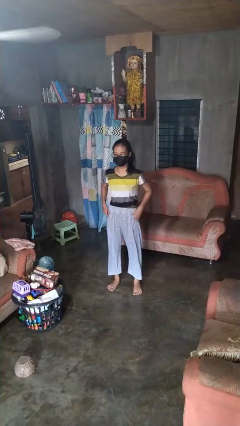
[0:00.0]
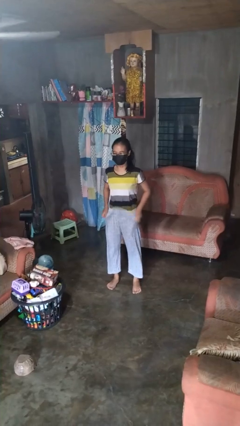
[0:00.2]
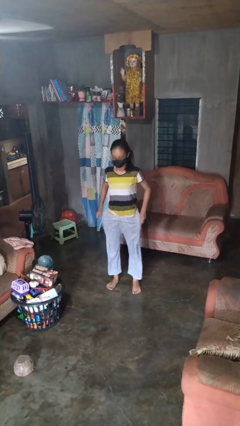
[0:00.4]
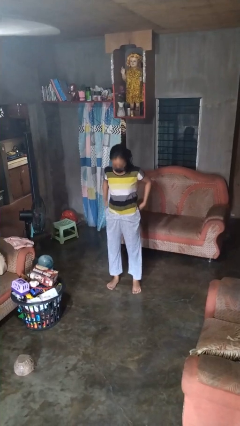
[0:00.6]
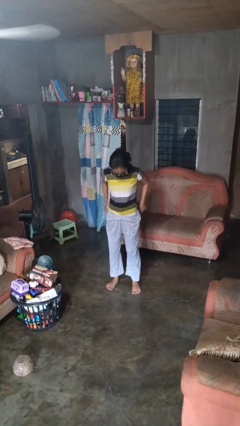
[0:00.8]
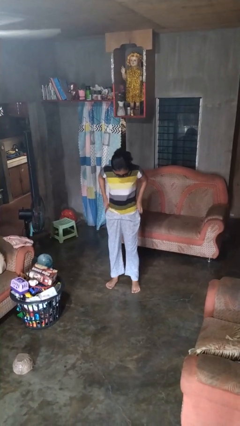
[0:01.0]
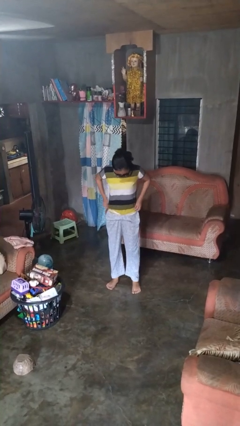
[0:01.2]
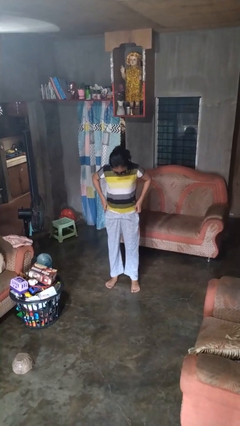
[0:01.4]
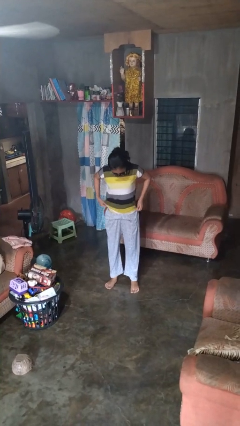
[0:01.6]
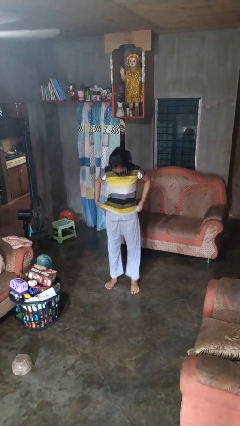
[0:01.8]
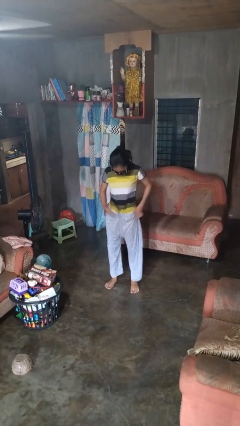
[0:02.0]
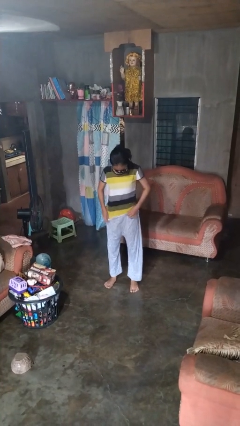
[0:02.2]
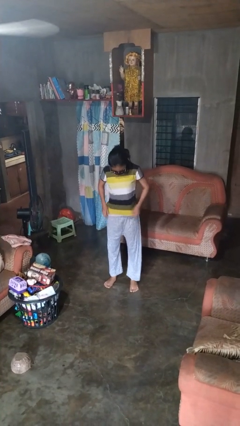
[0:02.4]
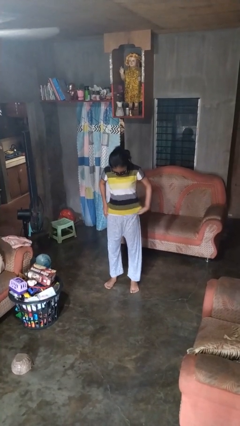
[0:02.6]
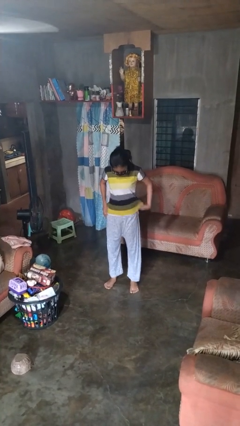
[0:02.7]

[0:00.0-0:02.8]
person untucks shirt

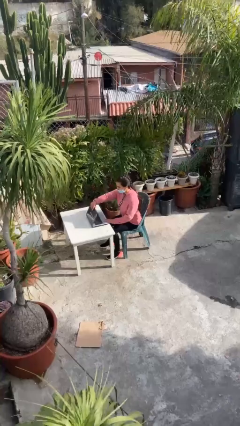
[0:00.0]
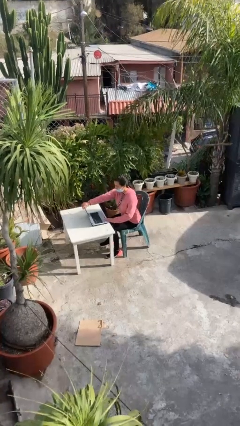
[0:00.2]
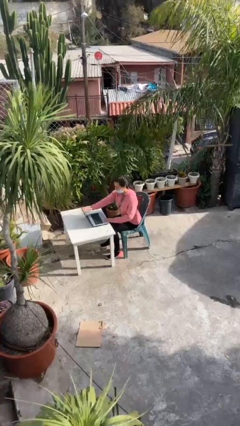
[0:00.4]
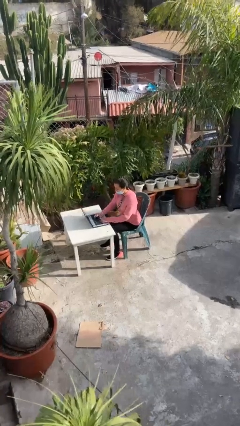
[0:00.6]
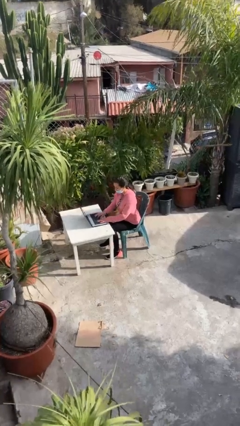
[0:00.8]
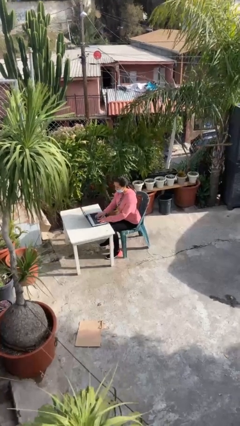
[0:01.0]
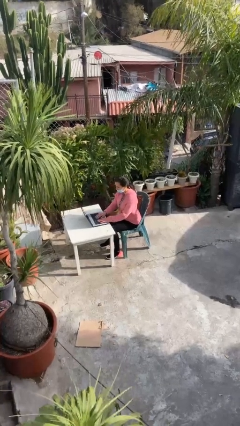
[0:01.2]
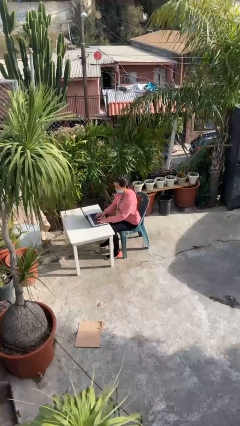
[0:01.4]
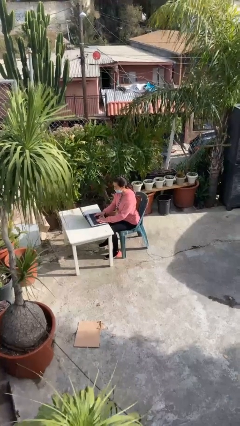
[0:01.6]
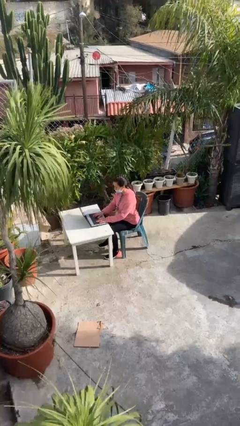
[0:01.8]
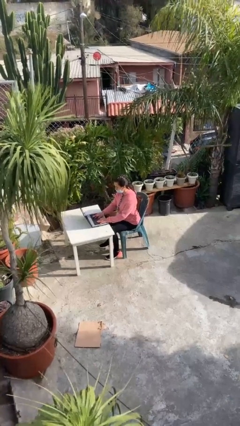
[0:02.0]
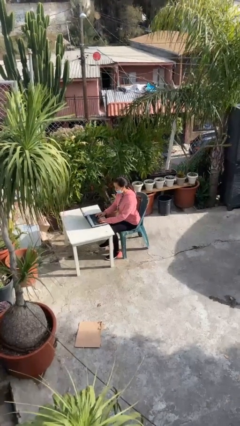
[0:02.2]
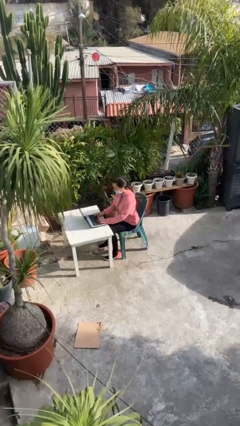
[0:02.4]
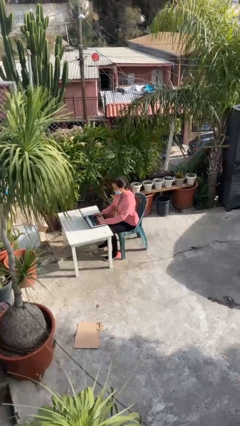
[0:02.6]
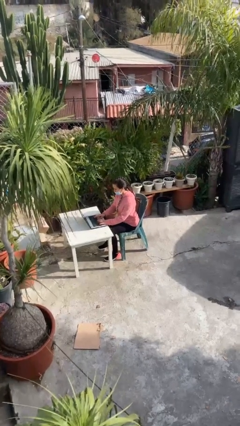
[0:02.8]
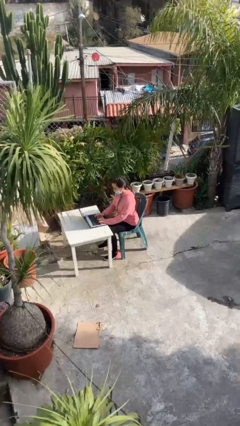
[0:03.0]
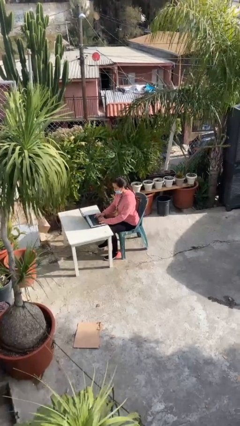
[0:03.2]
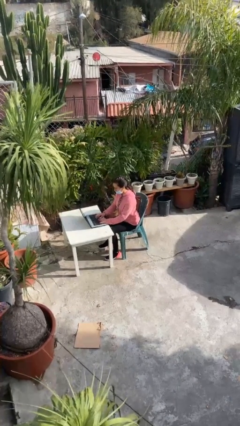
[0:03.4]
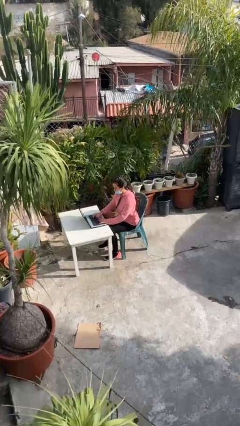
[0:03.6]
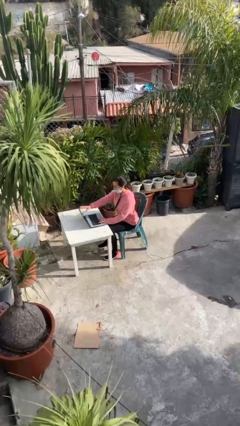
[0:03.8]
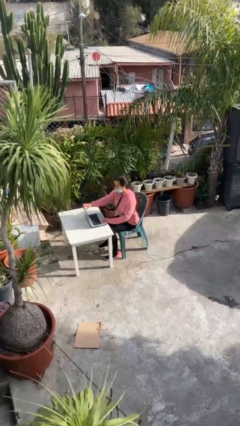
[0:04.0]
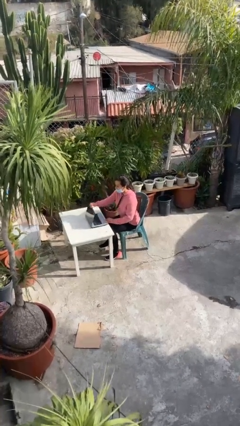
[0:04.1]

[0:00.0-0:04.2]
person interacts with laptop

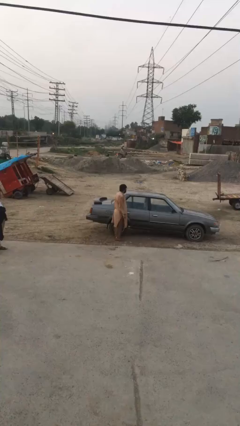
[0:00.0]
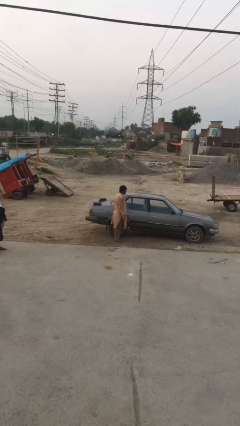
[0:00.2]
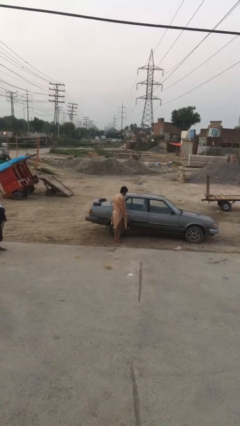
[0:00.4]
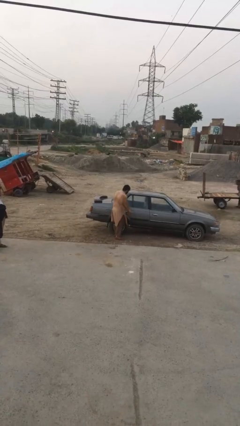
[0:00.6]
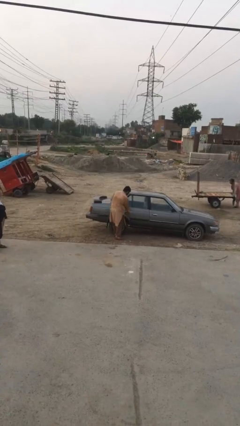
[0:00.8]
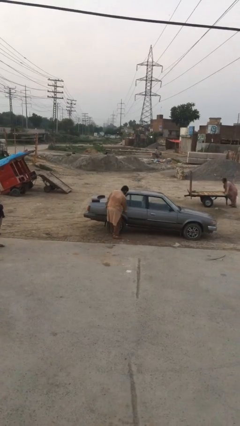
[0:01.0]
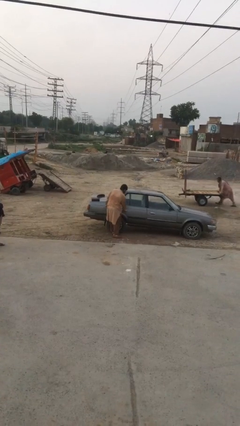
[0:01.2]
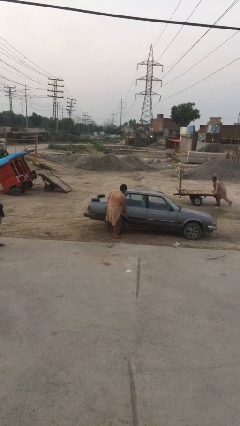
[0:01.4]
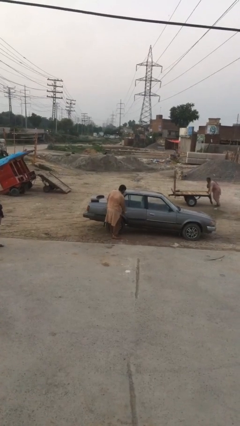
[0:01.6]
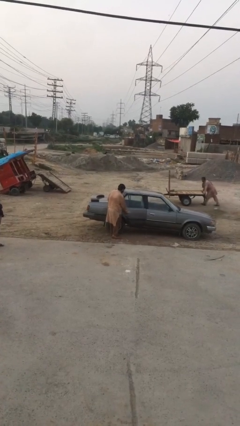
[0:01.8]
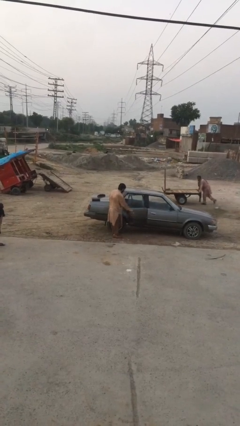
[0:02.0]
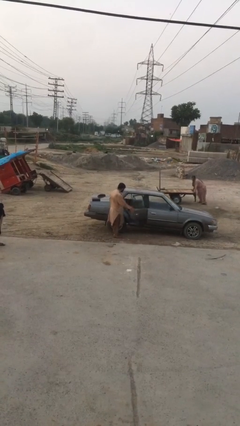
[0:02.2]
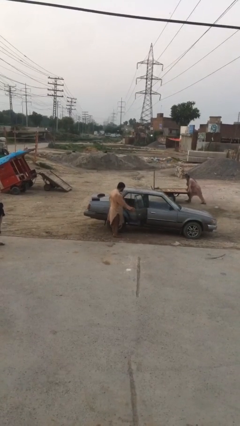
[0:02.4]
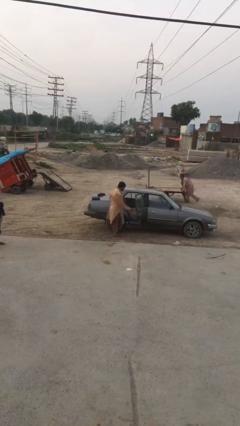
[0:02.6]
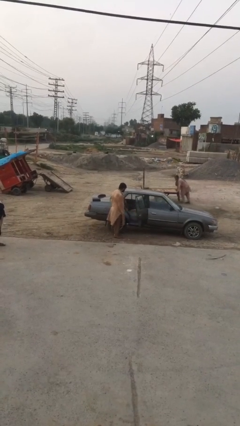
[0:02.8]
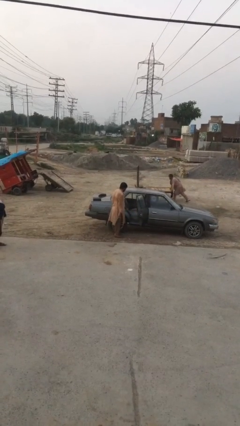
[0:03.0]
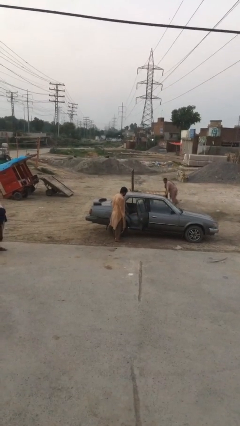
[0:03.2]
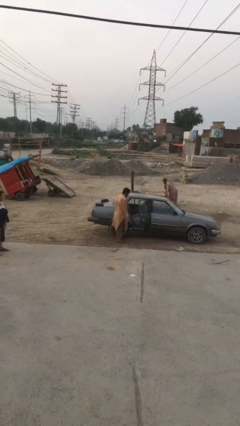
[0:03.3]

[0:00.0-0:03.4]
person opens car door

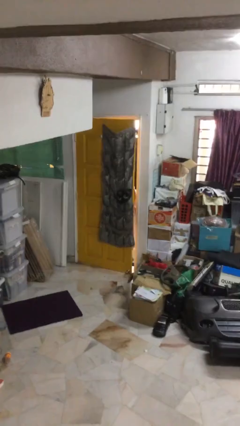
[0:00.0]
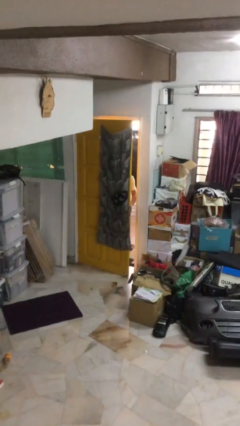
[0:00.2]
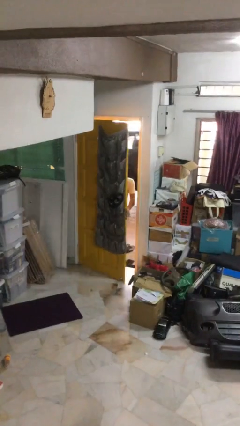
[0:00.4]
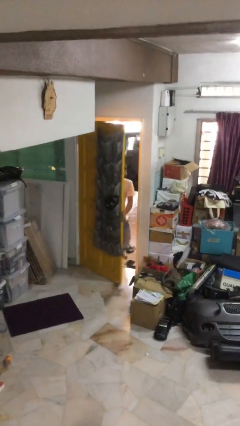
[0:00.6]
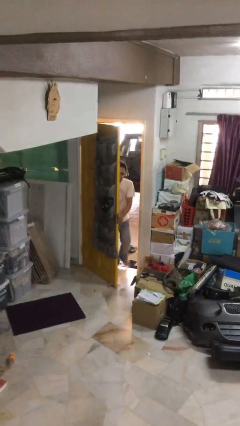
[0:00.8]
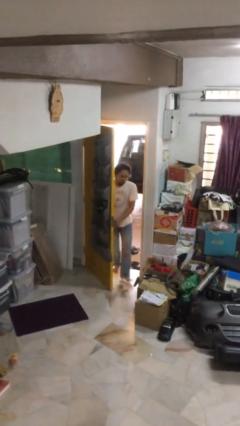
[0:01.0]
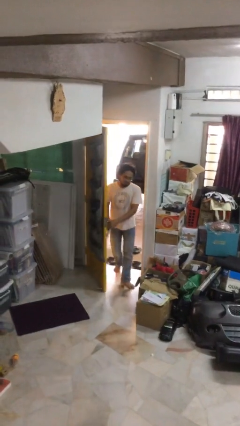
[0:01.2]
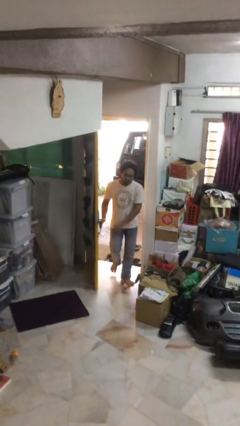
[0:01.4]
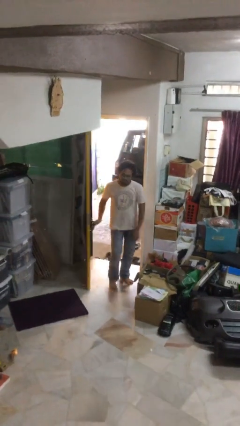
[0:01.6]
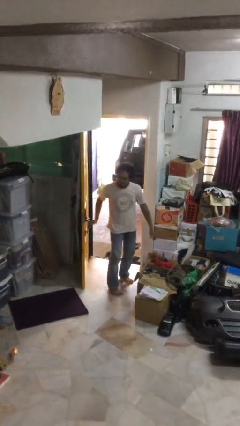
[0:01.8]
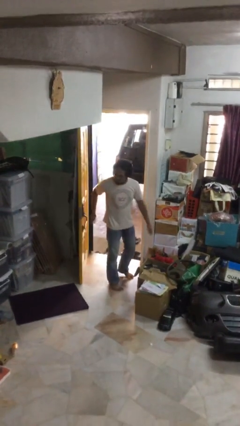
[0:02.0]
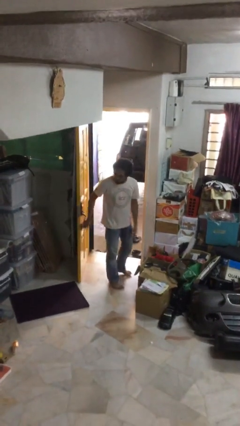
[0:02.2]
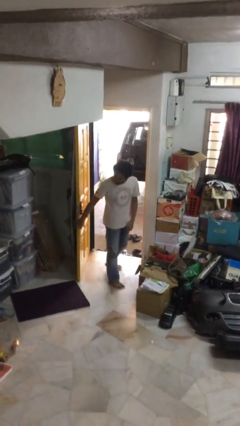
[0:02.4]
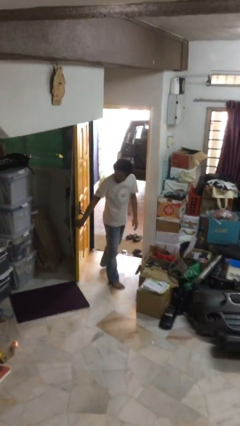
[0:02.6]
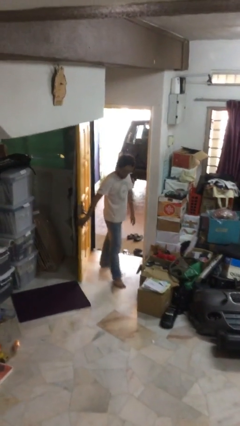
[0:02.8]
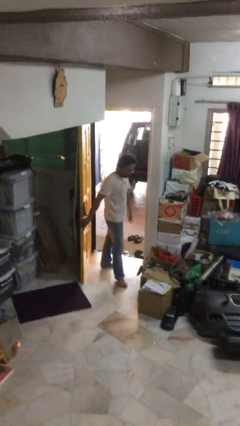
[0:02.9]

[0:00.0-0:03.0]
person opens facility door

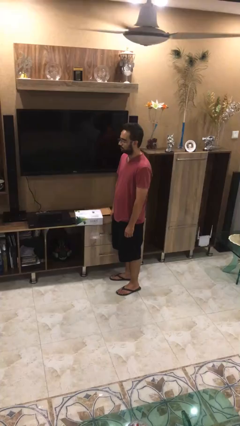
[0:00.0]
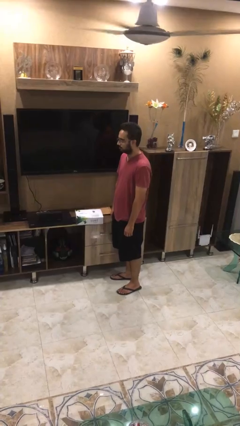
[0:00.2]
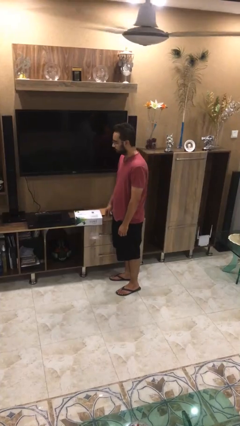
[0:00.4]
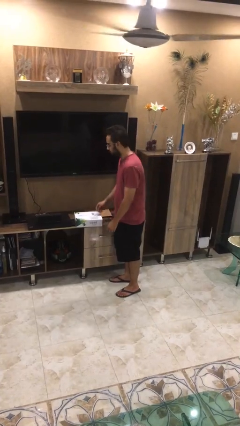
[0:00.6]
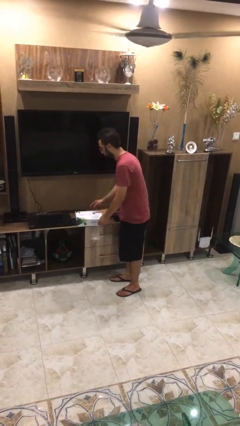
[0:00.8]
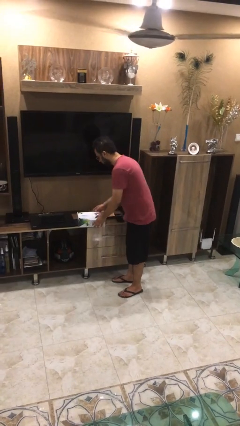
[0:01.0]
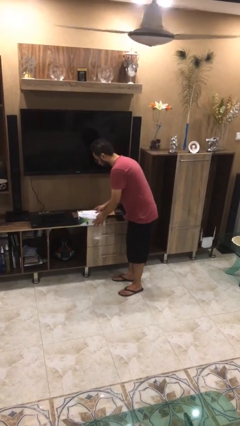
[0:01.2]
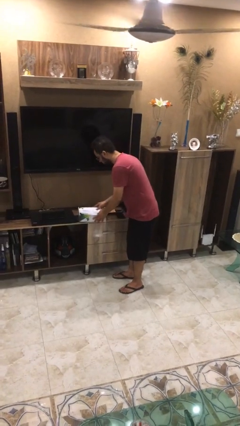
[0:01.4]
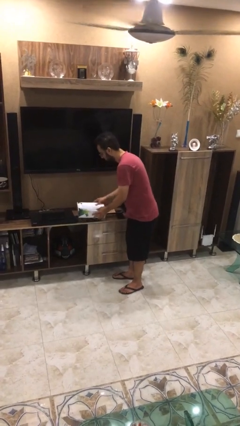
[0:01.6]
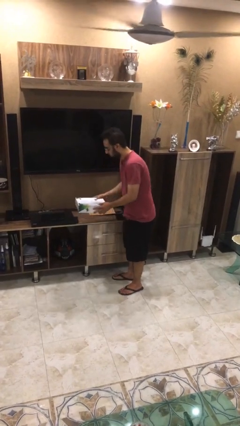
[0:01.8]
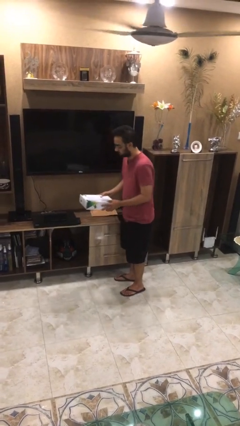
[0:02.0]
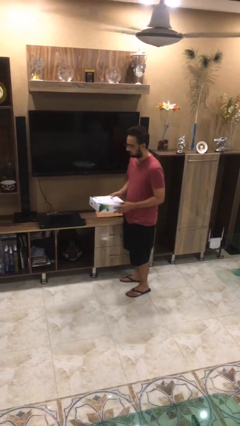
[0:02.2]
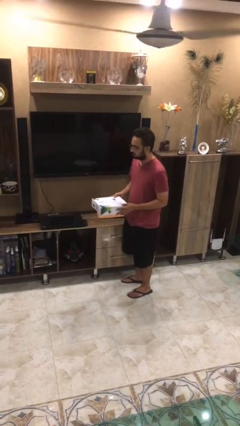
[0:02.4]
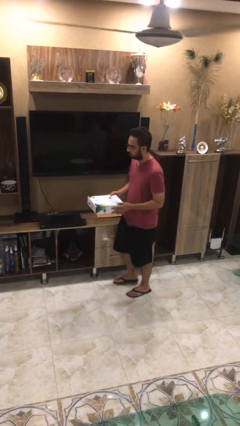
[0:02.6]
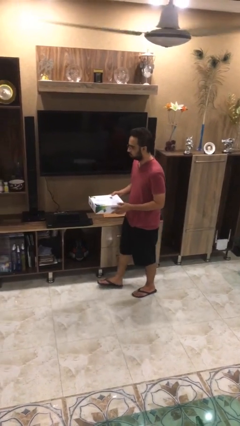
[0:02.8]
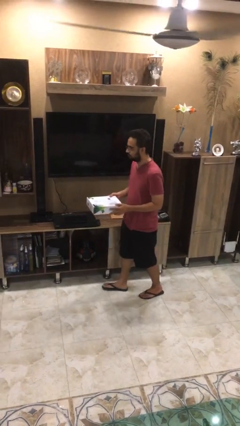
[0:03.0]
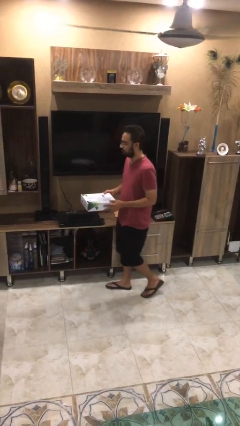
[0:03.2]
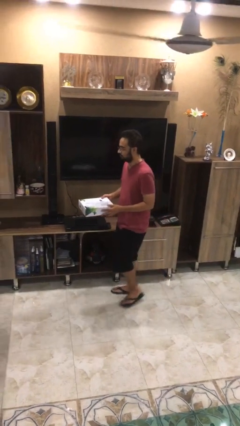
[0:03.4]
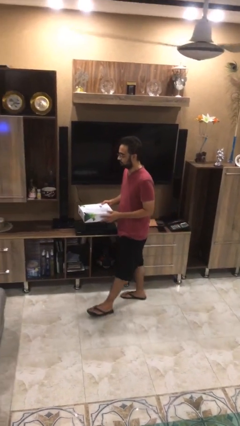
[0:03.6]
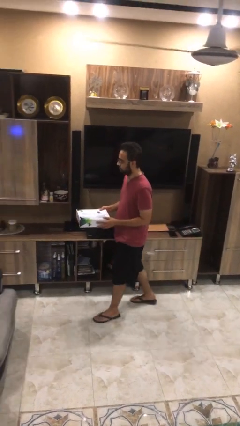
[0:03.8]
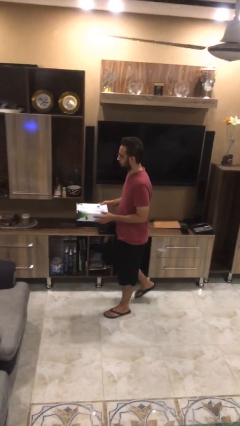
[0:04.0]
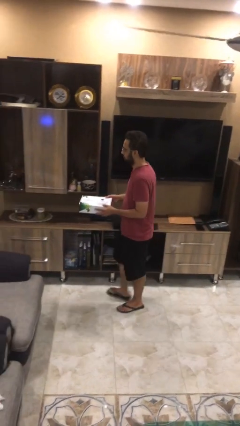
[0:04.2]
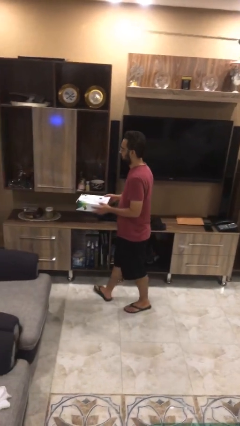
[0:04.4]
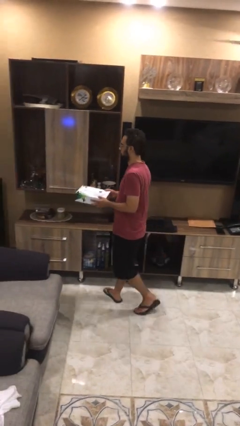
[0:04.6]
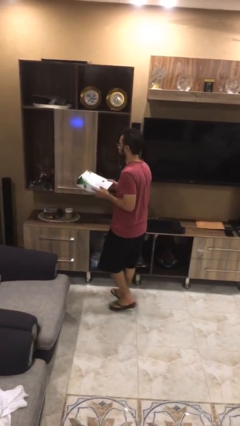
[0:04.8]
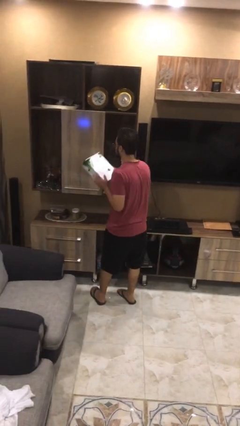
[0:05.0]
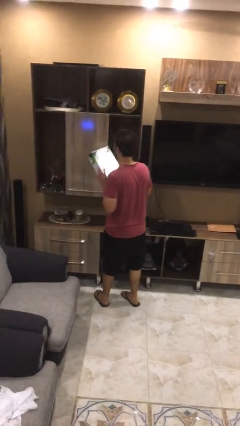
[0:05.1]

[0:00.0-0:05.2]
person picks up object from table
